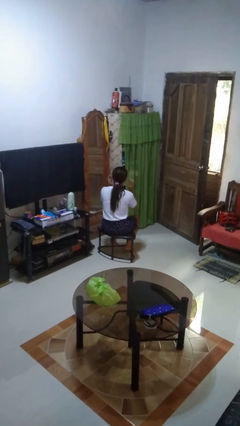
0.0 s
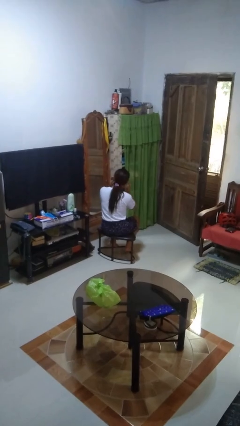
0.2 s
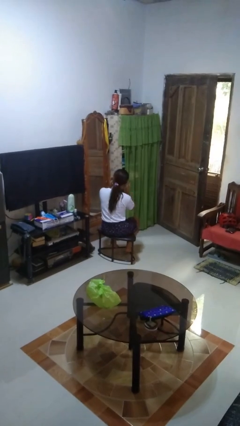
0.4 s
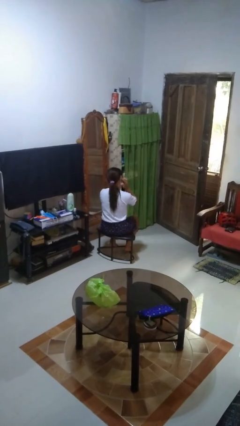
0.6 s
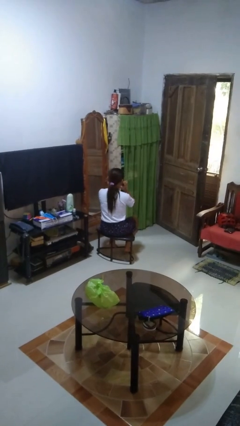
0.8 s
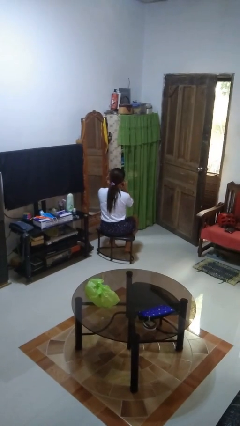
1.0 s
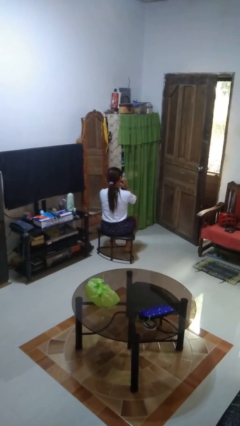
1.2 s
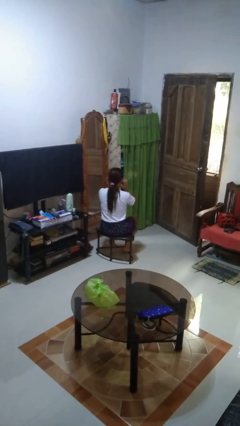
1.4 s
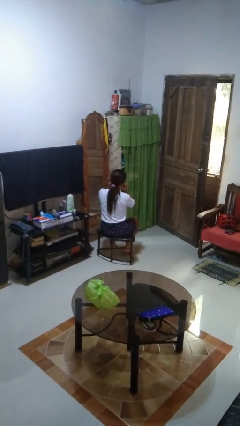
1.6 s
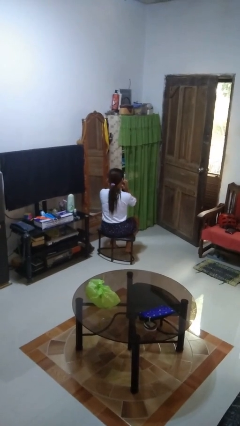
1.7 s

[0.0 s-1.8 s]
person puts fingers in ear

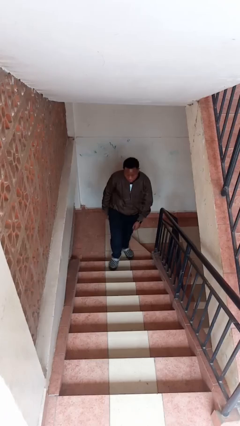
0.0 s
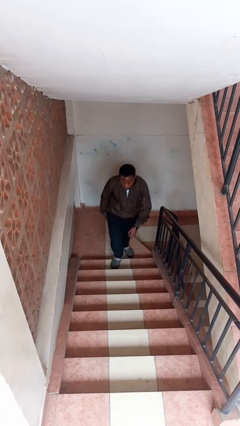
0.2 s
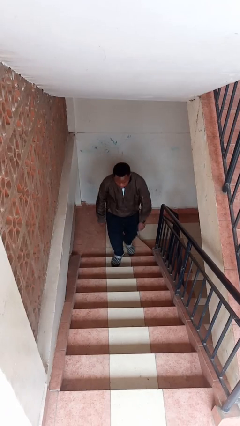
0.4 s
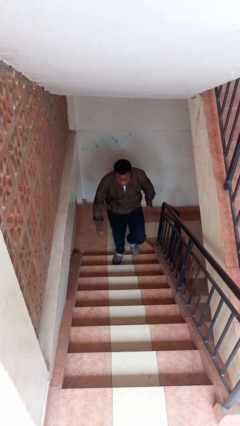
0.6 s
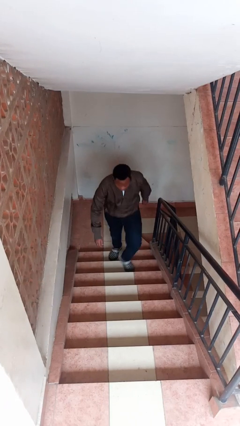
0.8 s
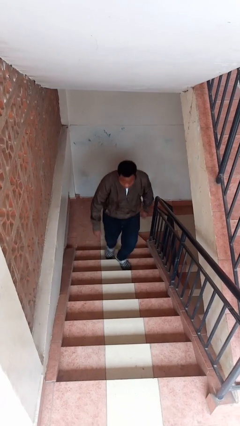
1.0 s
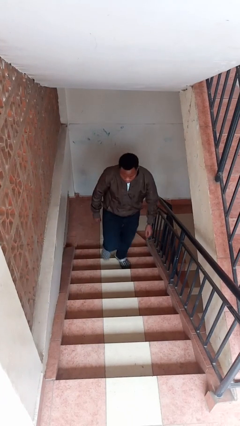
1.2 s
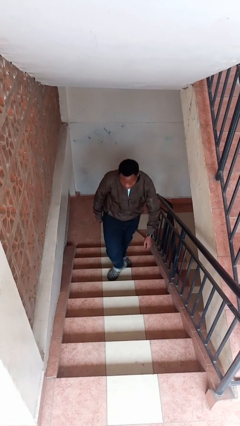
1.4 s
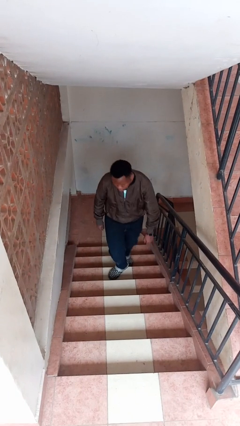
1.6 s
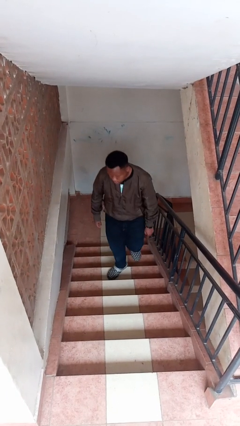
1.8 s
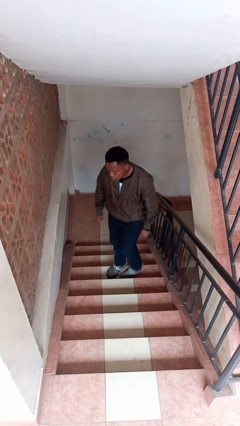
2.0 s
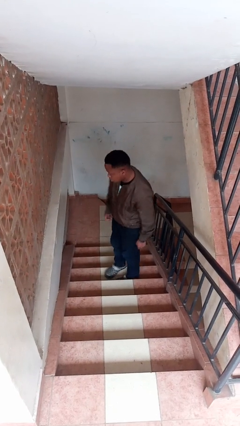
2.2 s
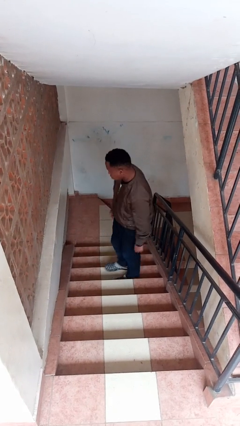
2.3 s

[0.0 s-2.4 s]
person climbs up stairs

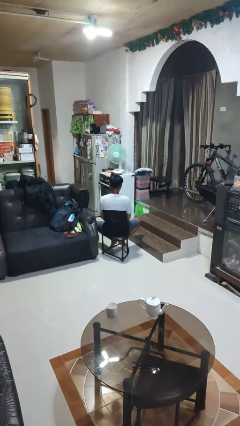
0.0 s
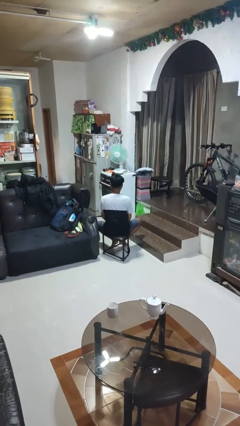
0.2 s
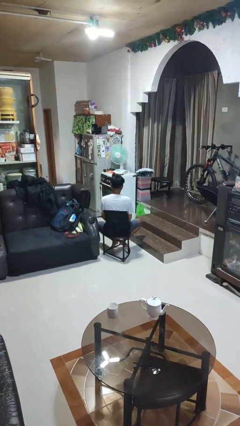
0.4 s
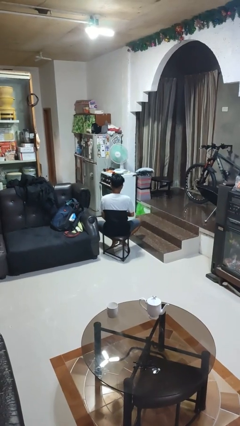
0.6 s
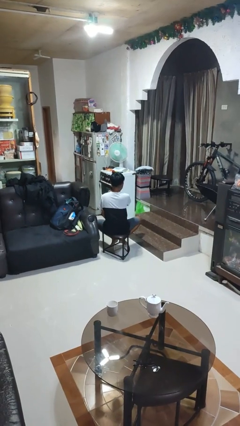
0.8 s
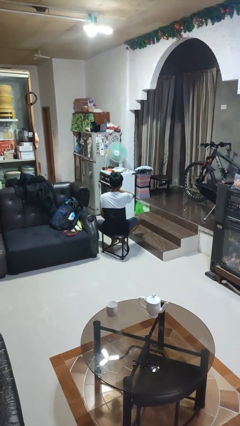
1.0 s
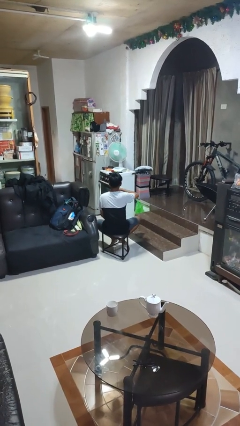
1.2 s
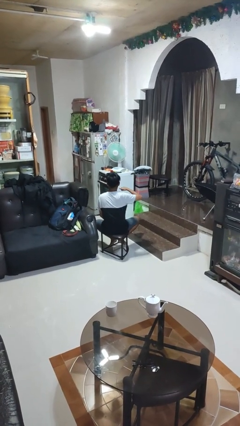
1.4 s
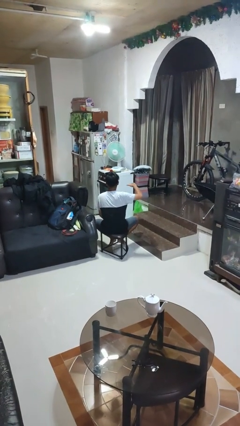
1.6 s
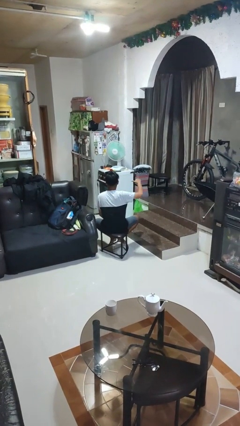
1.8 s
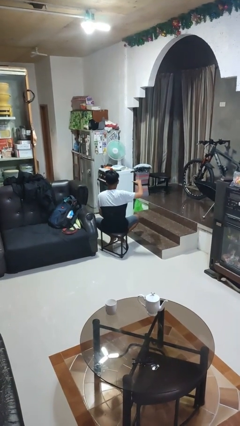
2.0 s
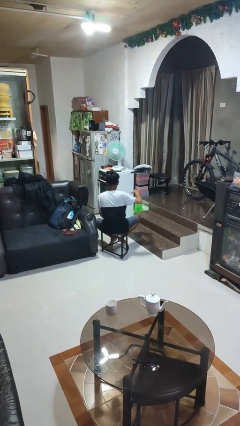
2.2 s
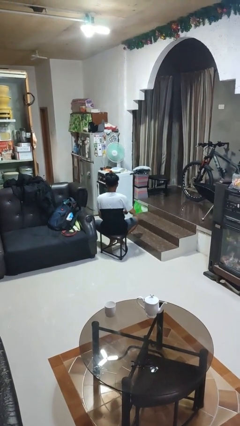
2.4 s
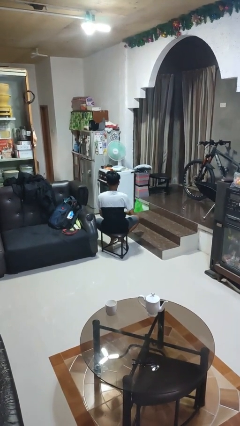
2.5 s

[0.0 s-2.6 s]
person gestures cut

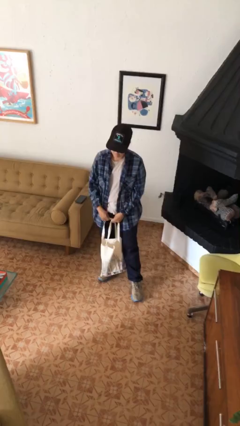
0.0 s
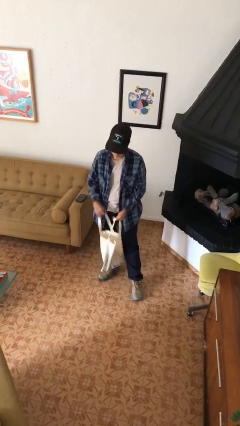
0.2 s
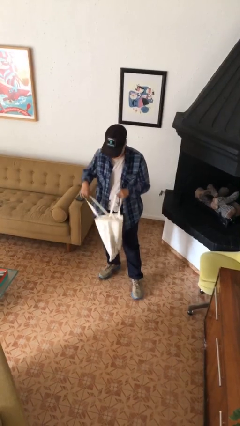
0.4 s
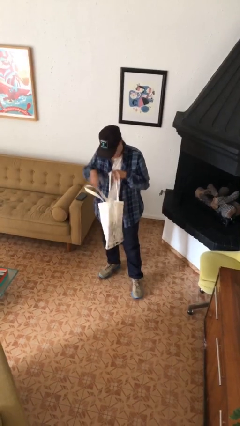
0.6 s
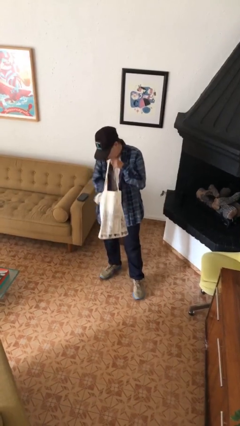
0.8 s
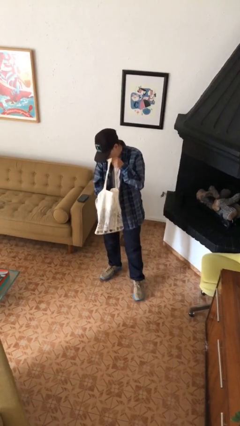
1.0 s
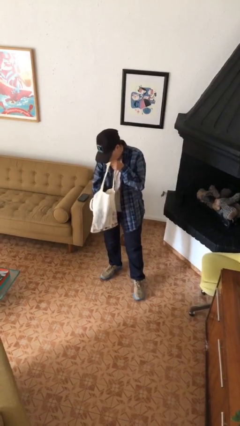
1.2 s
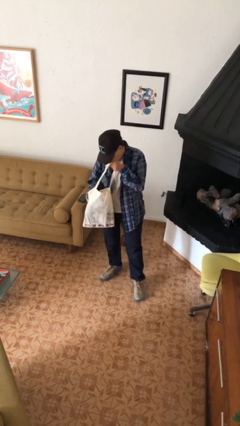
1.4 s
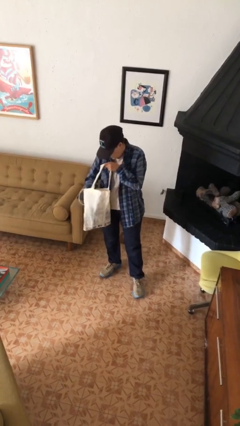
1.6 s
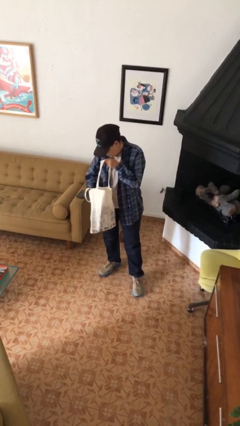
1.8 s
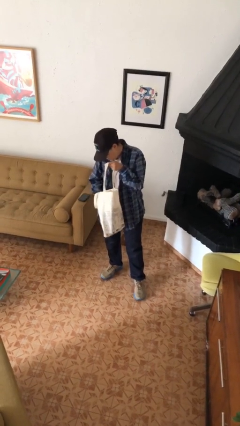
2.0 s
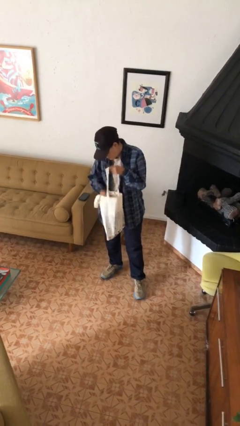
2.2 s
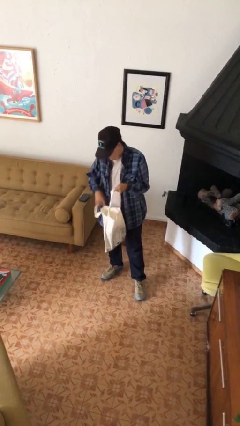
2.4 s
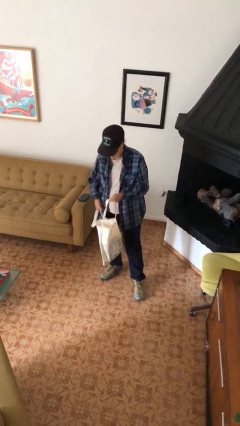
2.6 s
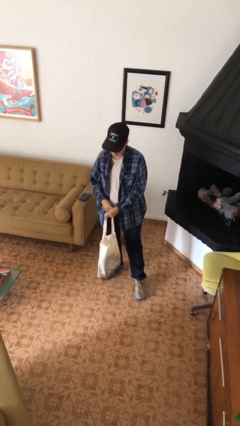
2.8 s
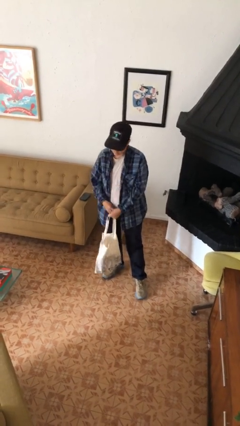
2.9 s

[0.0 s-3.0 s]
person searches in bag

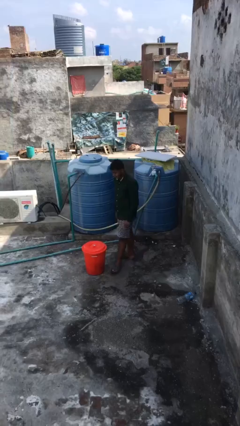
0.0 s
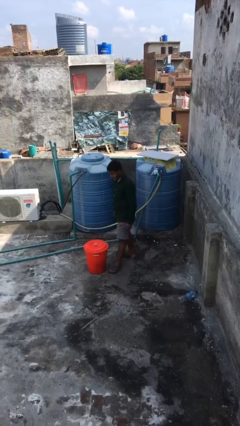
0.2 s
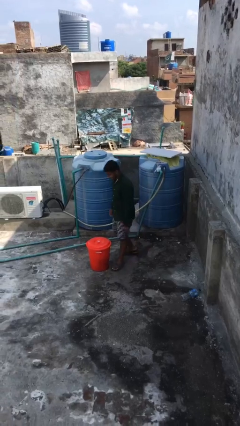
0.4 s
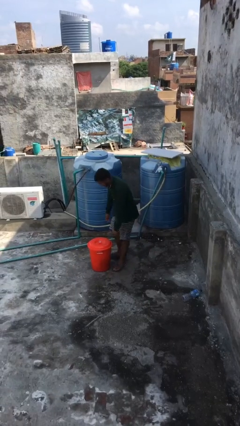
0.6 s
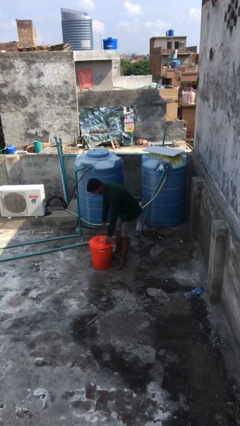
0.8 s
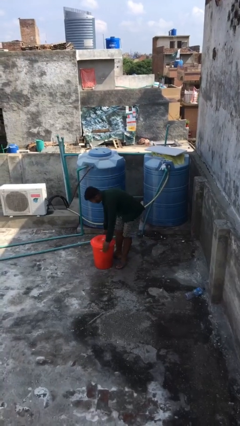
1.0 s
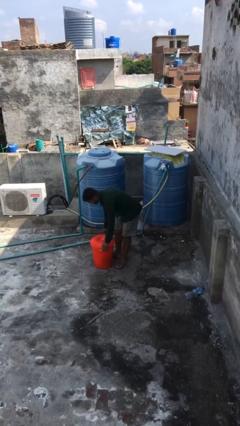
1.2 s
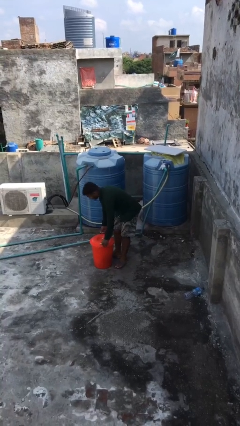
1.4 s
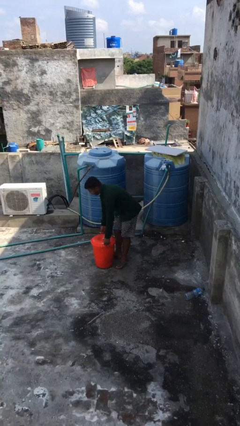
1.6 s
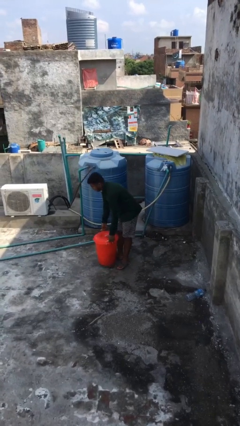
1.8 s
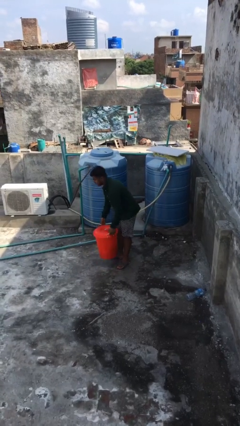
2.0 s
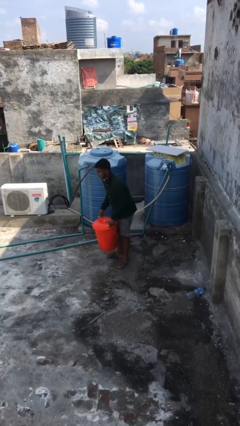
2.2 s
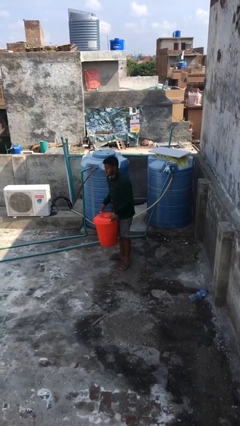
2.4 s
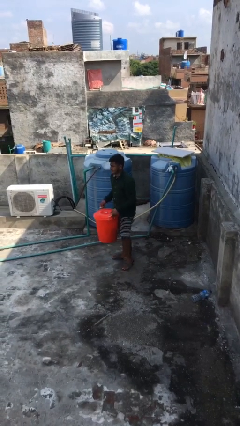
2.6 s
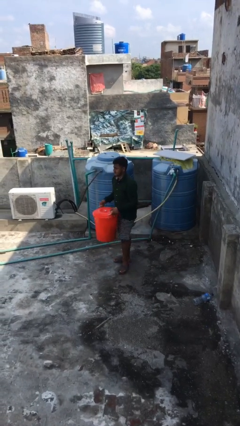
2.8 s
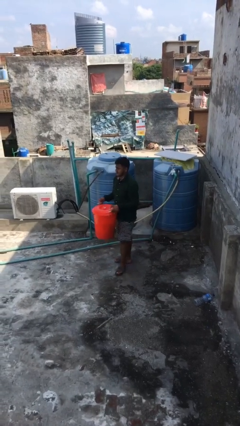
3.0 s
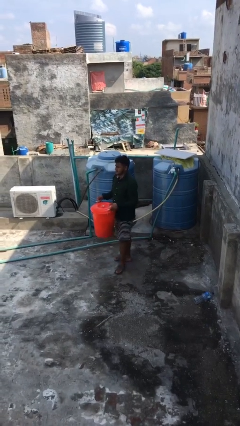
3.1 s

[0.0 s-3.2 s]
person picks up object from floor

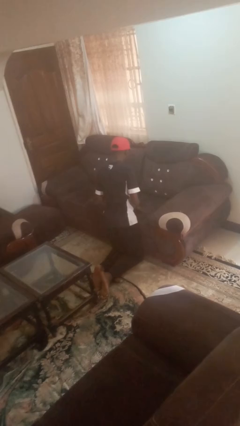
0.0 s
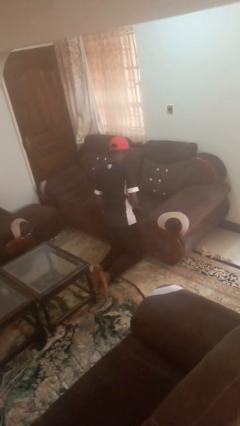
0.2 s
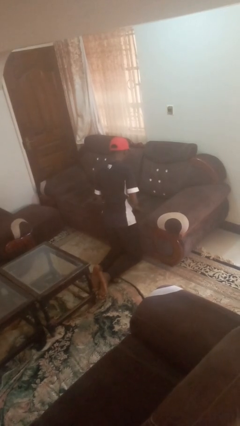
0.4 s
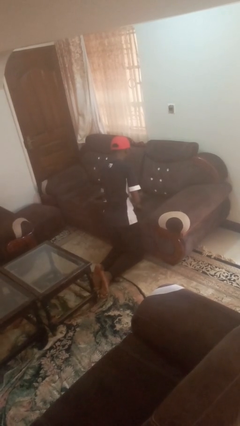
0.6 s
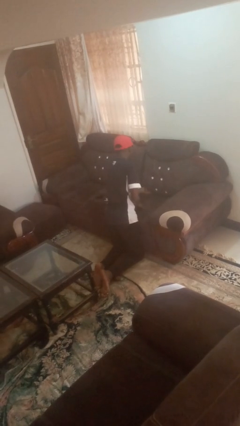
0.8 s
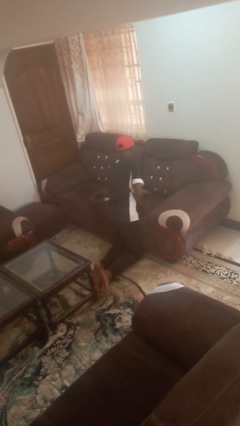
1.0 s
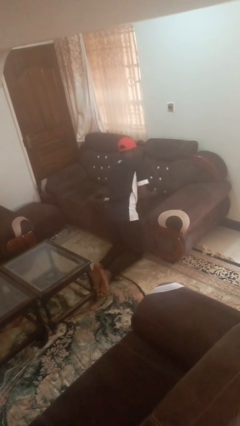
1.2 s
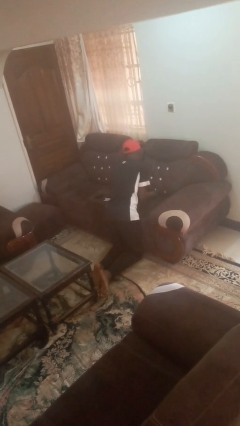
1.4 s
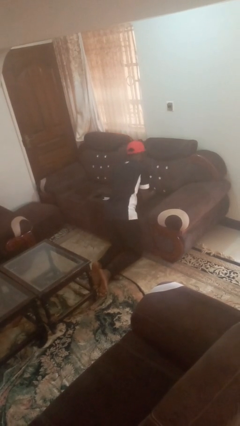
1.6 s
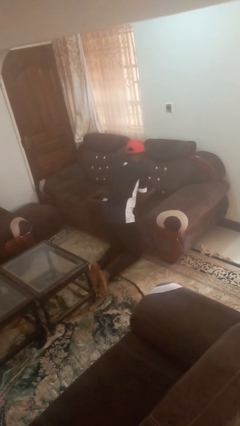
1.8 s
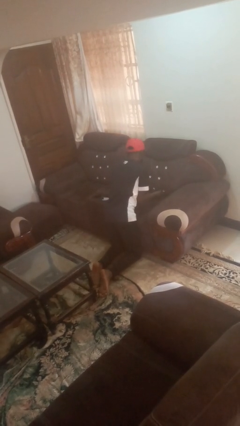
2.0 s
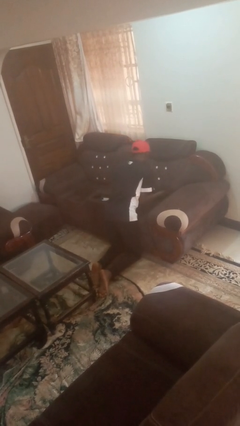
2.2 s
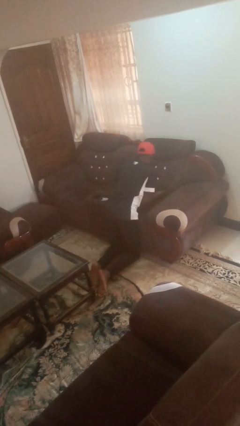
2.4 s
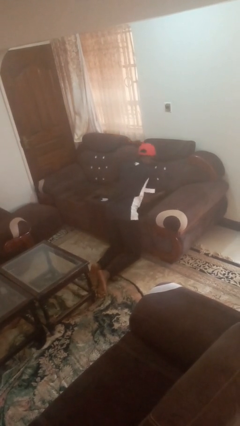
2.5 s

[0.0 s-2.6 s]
person searches in couch

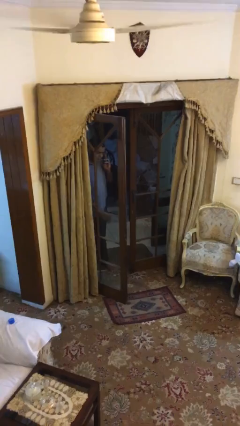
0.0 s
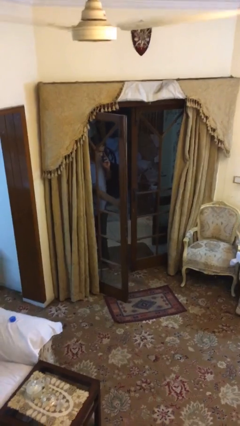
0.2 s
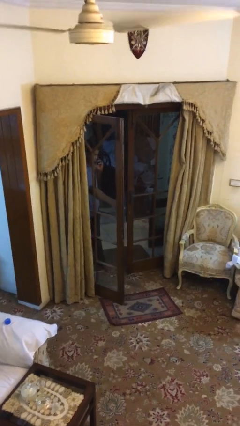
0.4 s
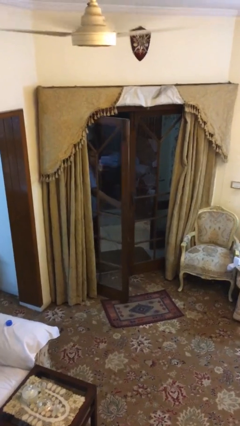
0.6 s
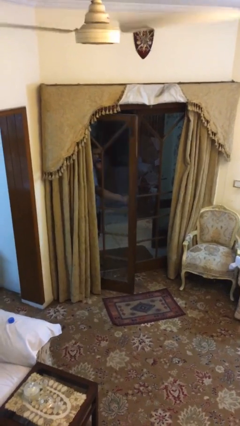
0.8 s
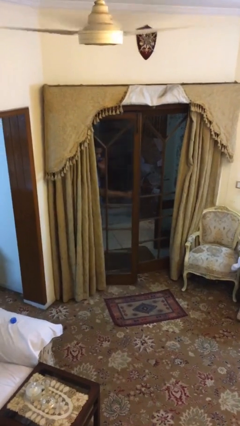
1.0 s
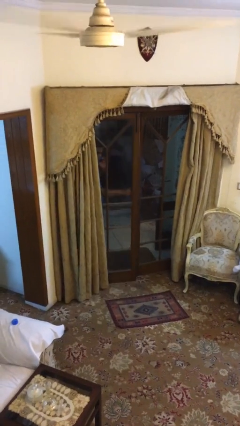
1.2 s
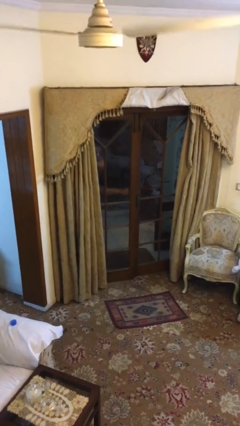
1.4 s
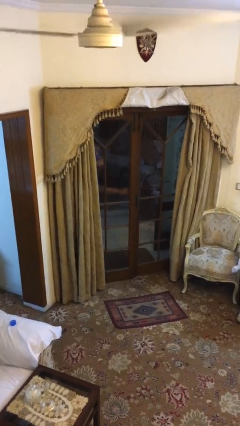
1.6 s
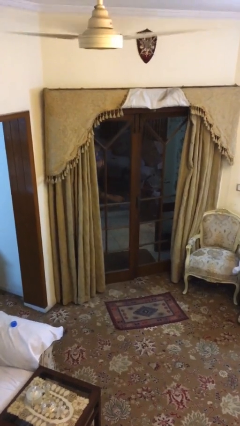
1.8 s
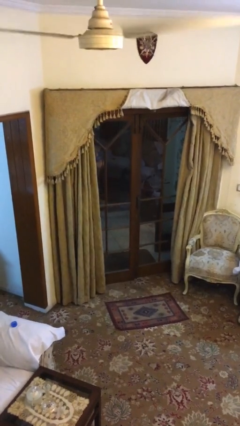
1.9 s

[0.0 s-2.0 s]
person closes facility door
